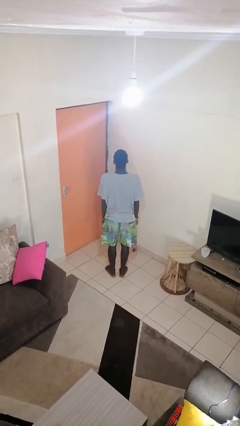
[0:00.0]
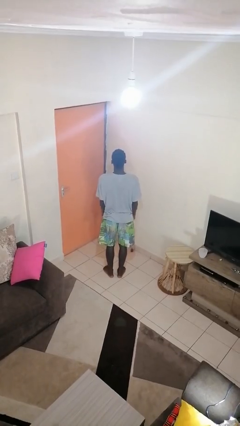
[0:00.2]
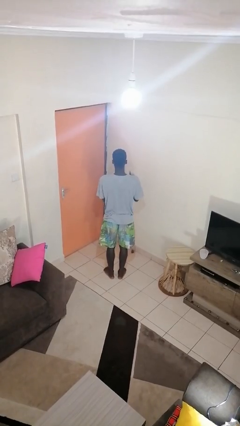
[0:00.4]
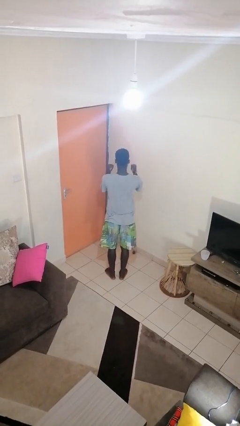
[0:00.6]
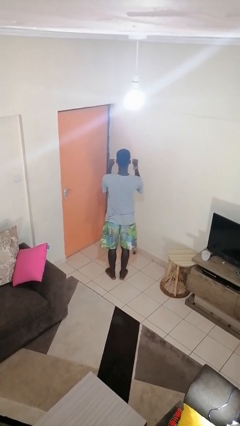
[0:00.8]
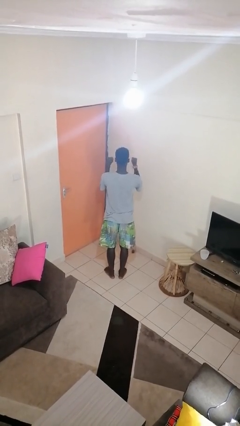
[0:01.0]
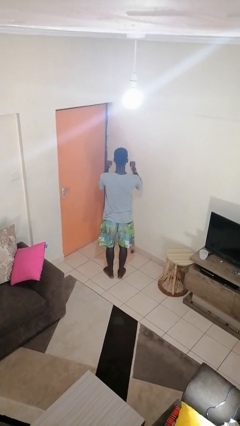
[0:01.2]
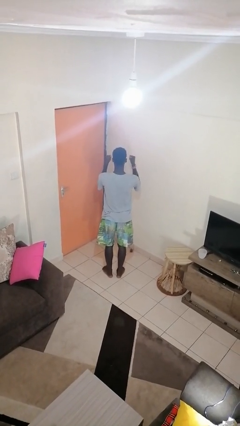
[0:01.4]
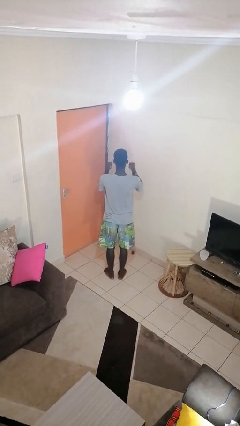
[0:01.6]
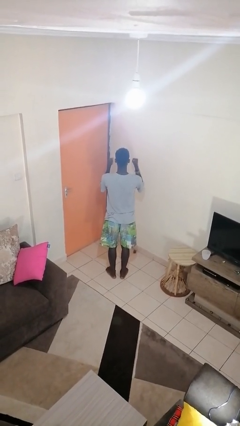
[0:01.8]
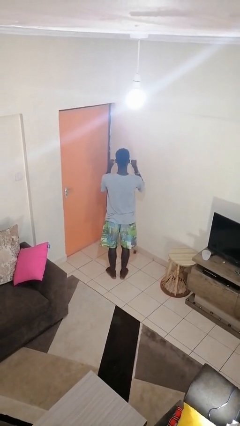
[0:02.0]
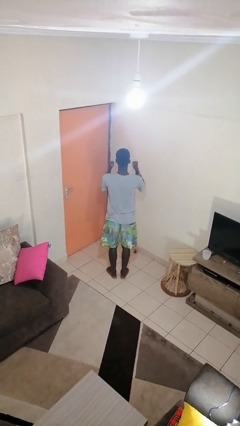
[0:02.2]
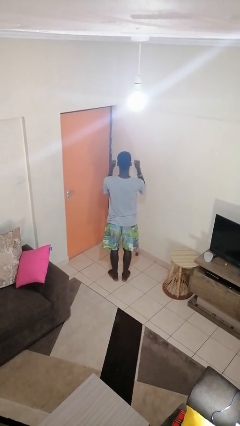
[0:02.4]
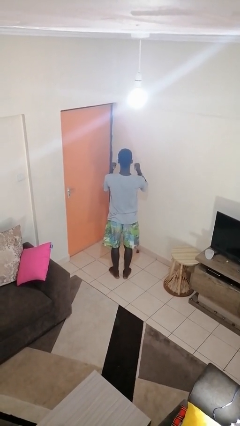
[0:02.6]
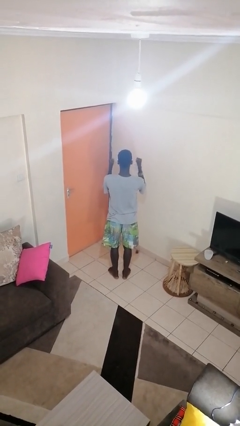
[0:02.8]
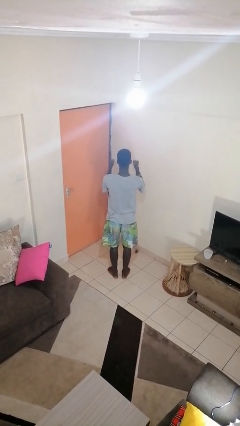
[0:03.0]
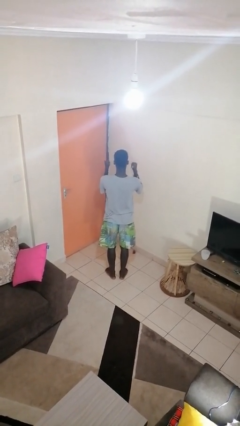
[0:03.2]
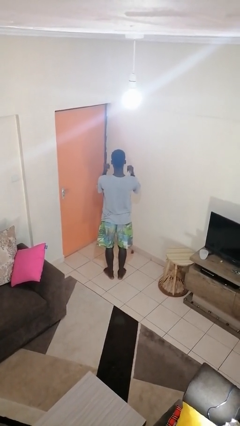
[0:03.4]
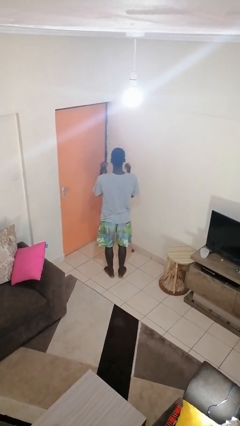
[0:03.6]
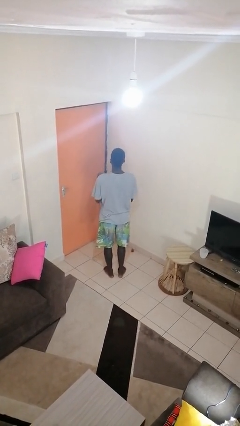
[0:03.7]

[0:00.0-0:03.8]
person gestures behind me

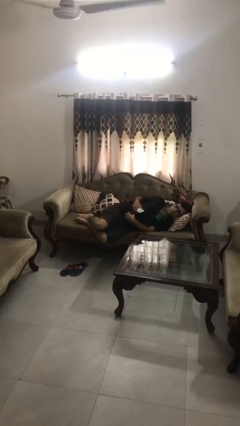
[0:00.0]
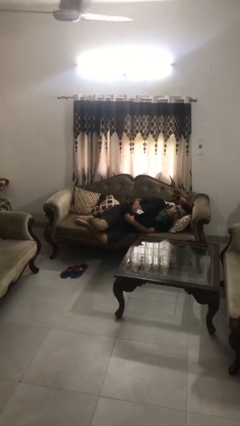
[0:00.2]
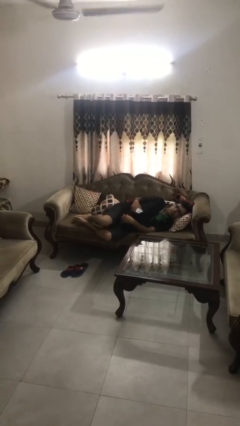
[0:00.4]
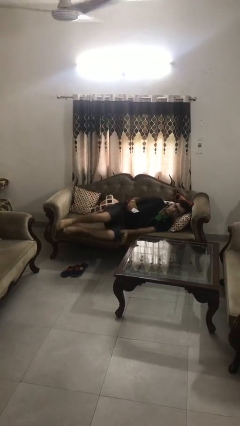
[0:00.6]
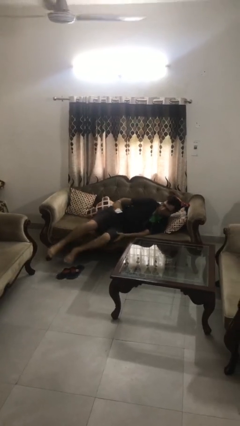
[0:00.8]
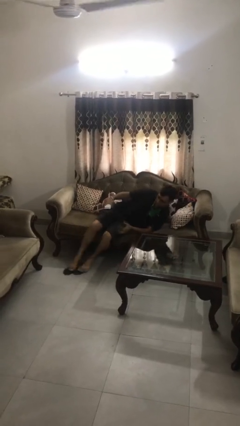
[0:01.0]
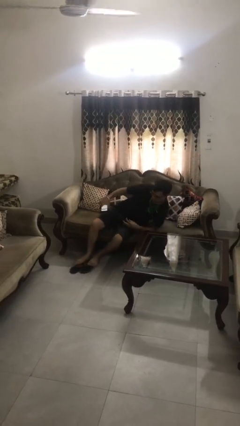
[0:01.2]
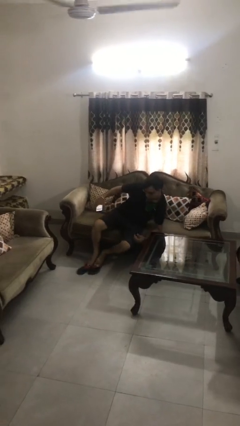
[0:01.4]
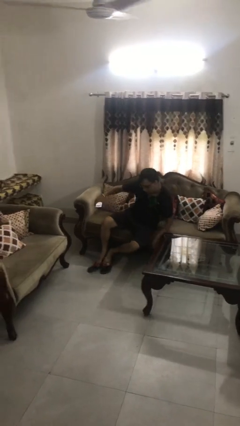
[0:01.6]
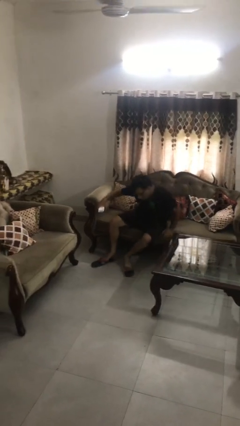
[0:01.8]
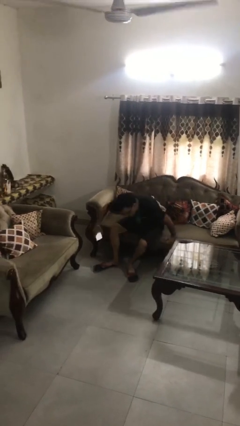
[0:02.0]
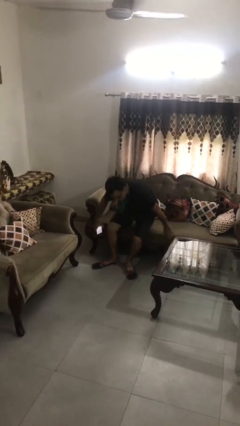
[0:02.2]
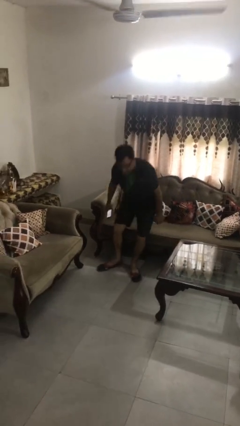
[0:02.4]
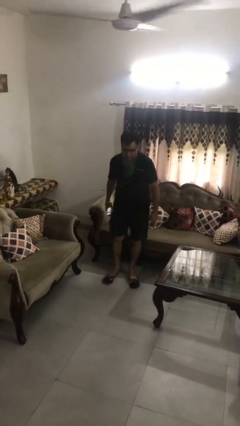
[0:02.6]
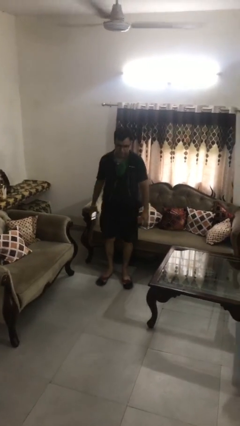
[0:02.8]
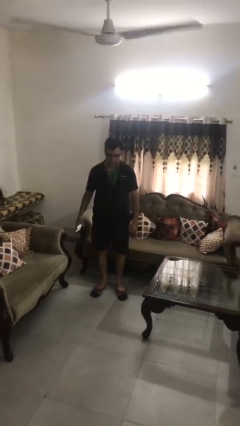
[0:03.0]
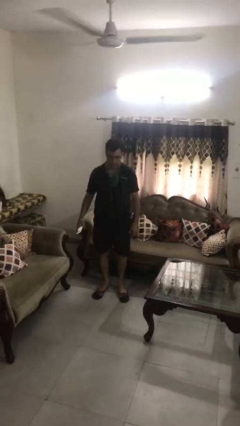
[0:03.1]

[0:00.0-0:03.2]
person stands up

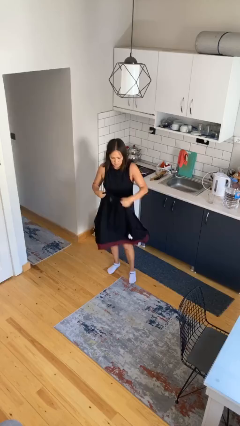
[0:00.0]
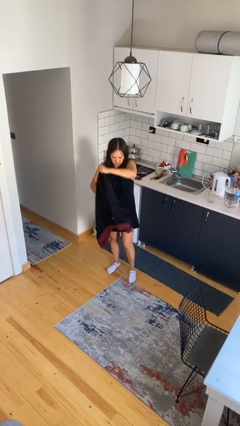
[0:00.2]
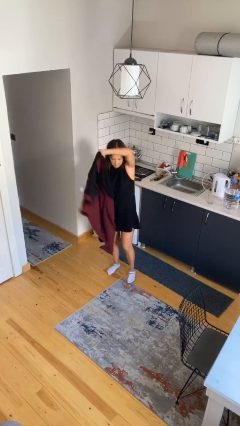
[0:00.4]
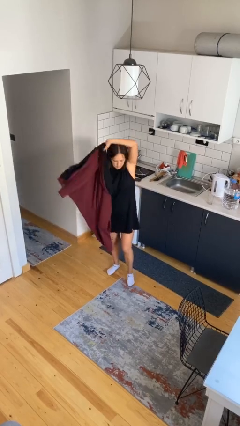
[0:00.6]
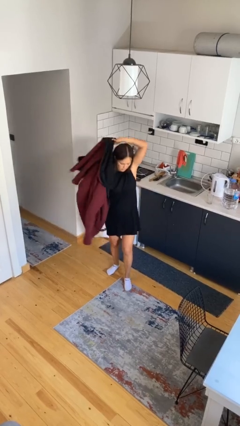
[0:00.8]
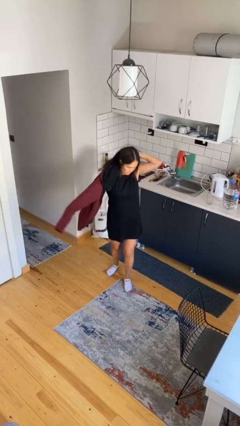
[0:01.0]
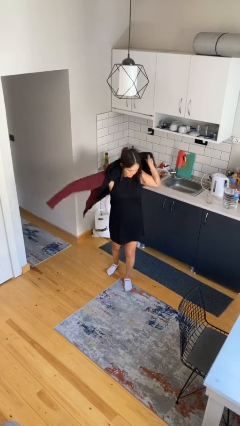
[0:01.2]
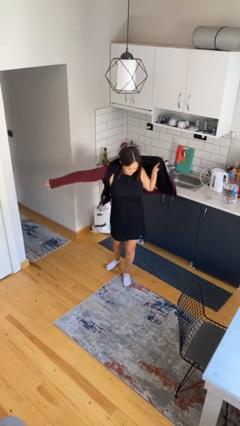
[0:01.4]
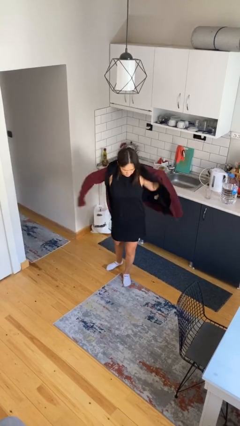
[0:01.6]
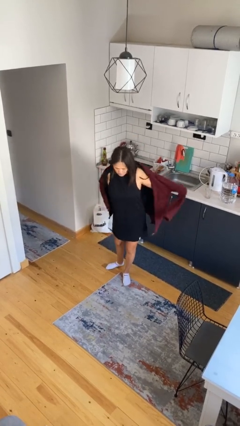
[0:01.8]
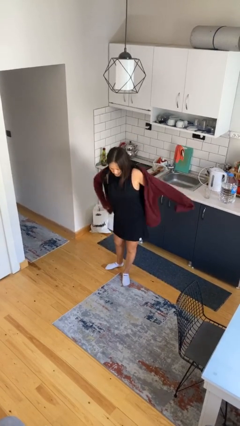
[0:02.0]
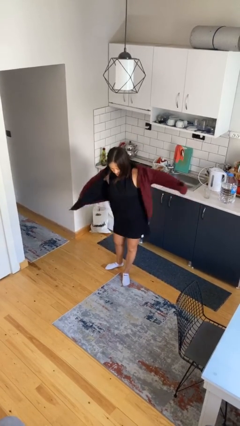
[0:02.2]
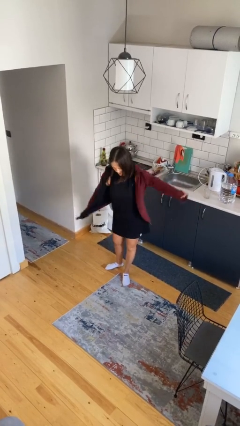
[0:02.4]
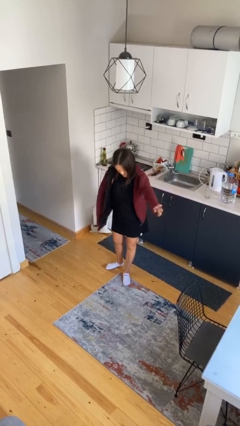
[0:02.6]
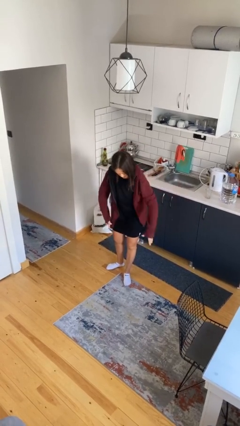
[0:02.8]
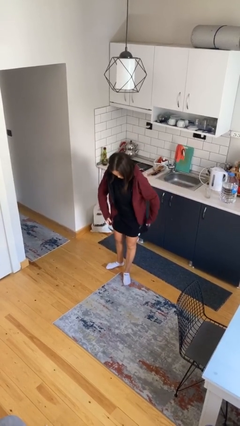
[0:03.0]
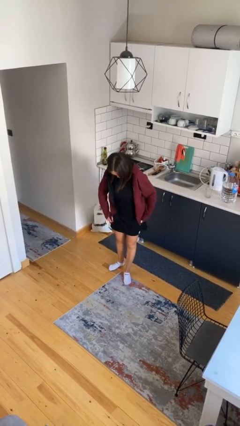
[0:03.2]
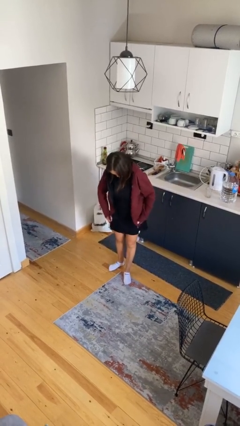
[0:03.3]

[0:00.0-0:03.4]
person puts on jacket

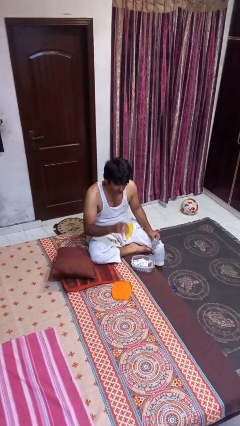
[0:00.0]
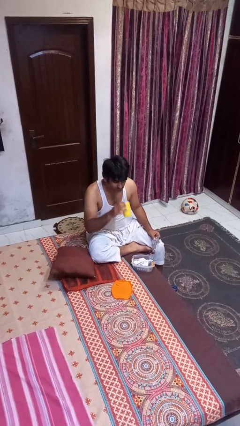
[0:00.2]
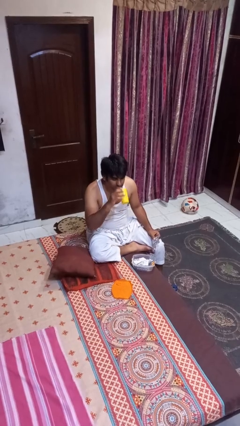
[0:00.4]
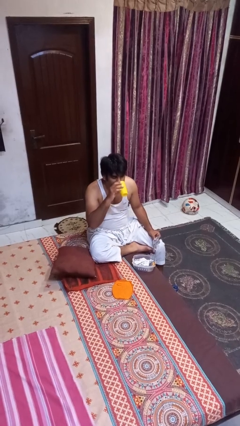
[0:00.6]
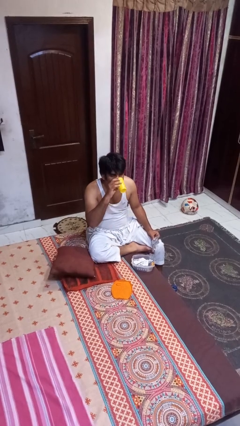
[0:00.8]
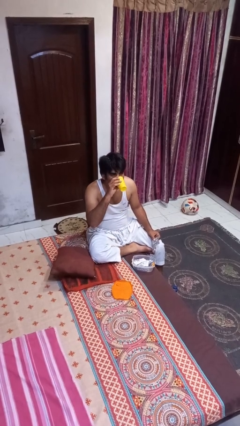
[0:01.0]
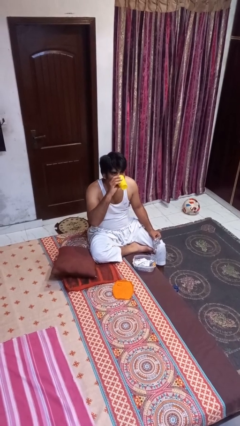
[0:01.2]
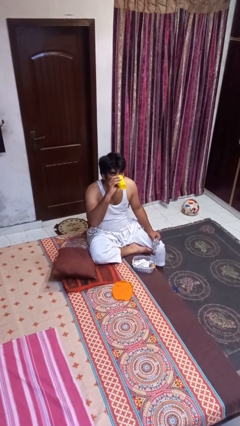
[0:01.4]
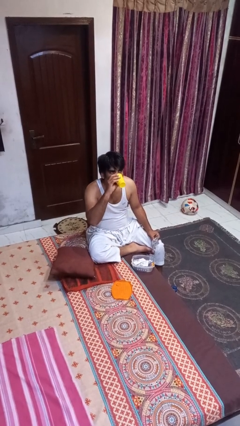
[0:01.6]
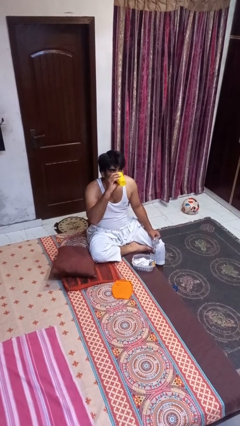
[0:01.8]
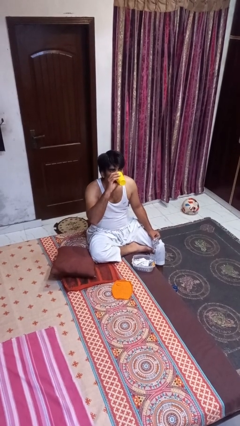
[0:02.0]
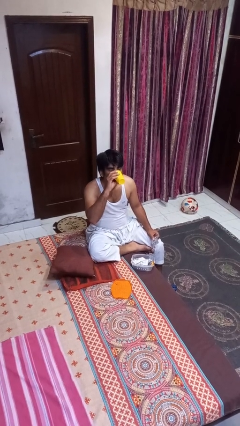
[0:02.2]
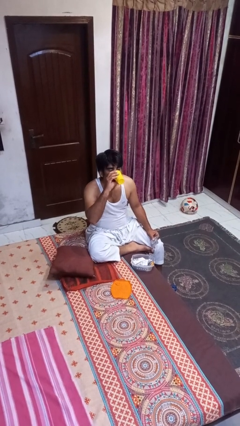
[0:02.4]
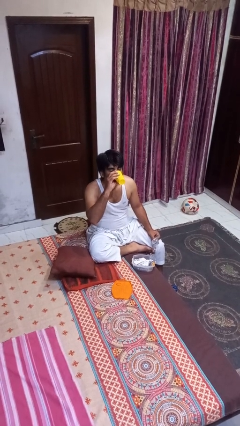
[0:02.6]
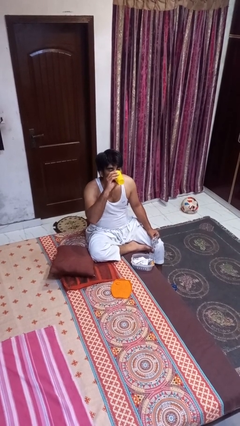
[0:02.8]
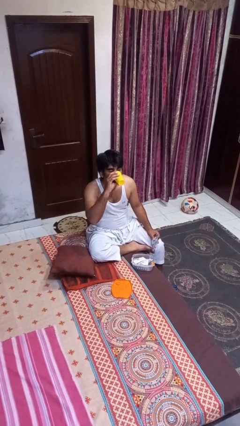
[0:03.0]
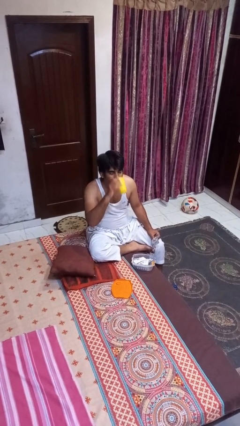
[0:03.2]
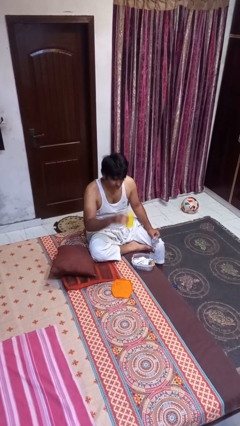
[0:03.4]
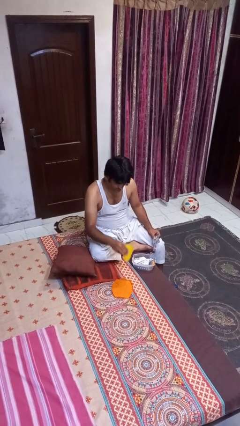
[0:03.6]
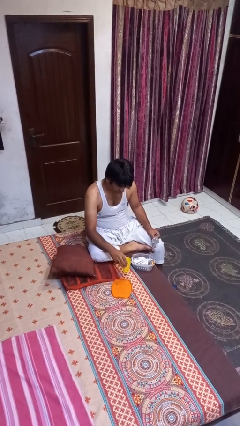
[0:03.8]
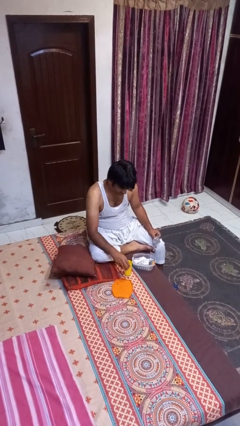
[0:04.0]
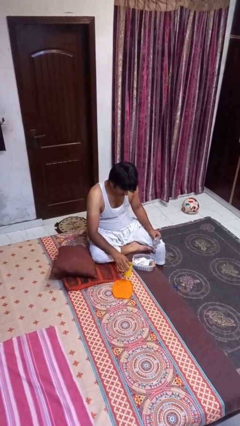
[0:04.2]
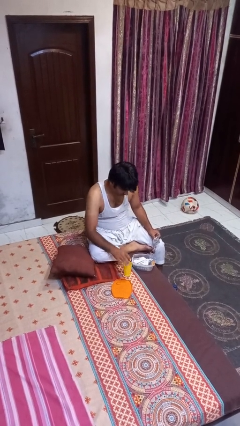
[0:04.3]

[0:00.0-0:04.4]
person drinks from cup

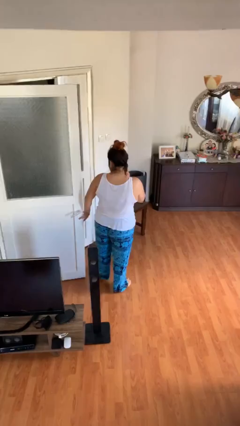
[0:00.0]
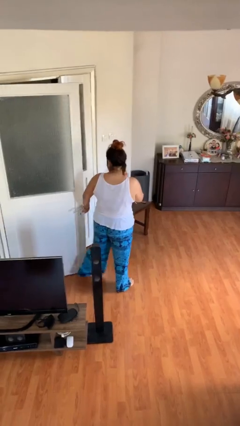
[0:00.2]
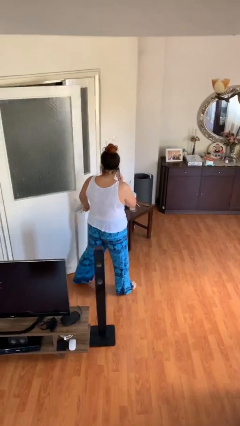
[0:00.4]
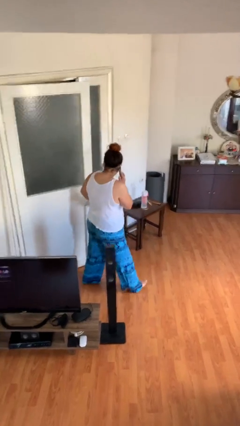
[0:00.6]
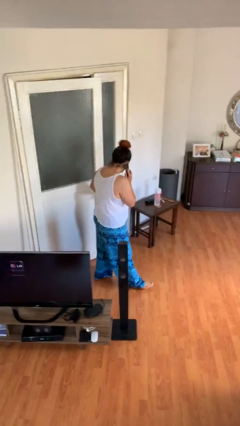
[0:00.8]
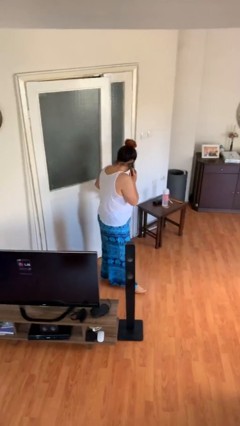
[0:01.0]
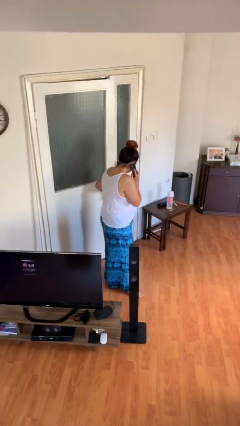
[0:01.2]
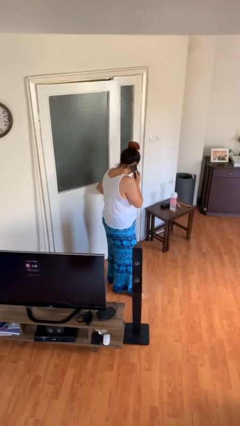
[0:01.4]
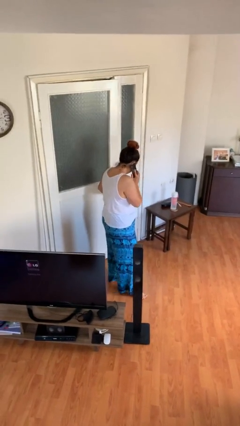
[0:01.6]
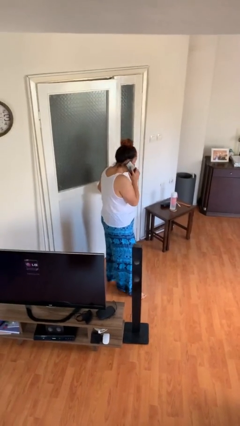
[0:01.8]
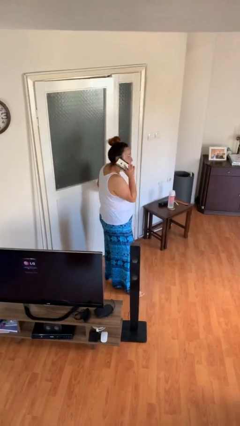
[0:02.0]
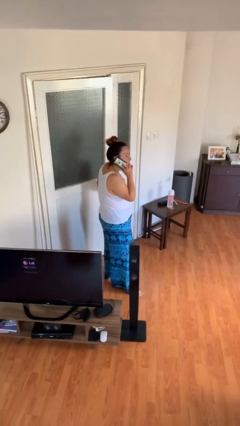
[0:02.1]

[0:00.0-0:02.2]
person closes facility door

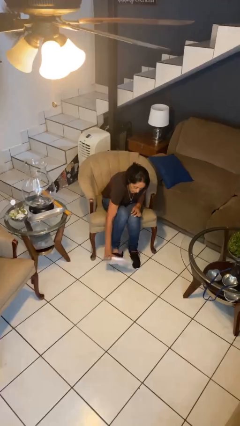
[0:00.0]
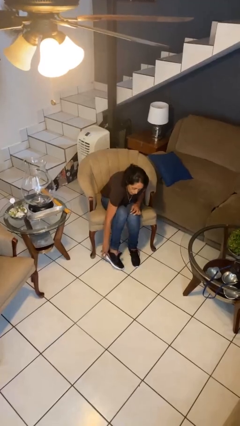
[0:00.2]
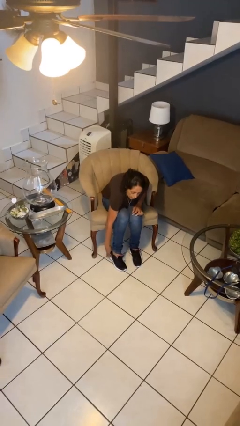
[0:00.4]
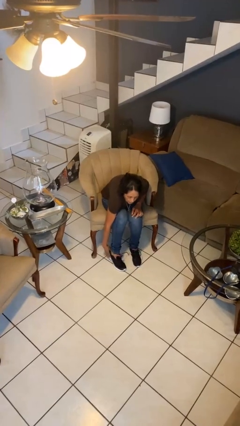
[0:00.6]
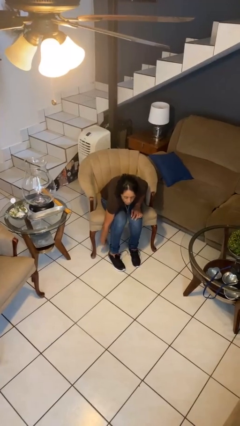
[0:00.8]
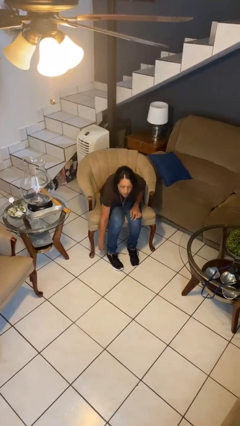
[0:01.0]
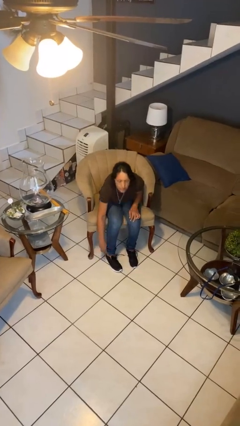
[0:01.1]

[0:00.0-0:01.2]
person puts on shoes
